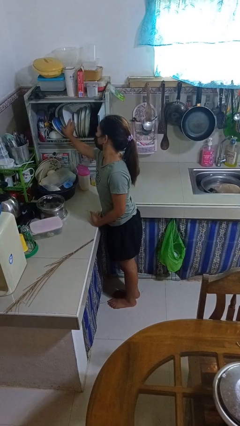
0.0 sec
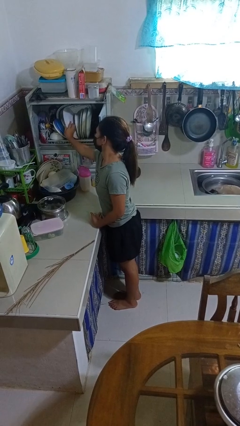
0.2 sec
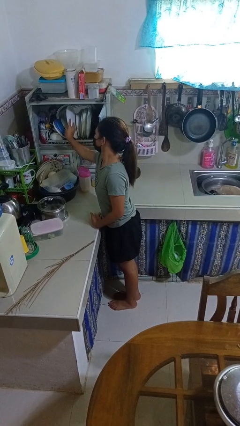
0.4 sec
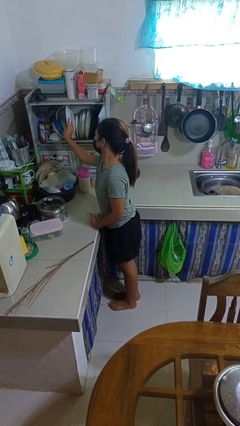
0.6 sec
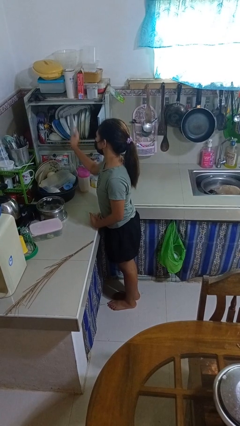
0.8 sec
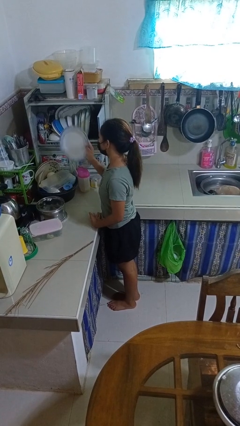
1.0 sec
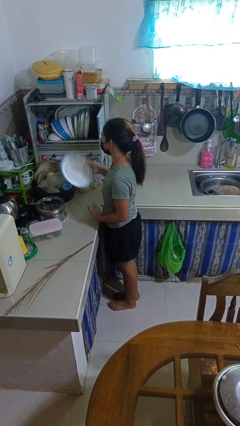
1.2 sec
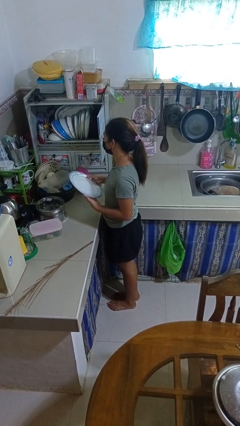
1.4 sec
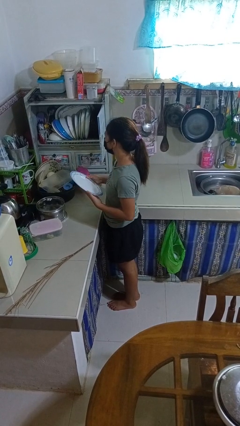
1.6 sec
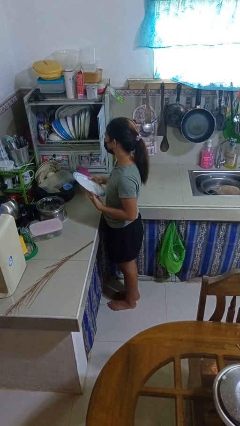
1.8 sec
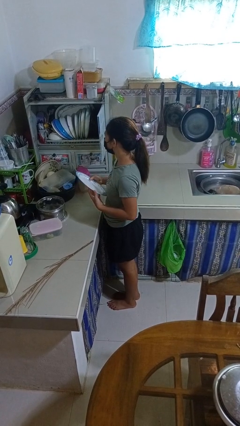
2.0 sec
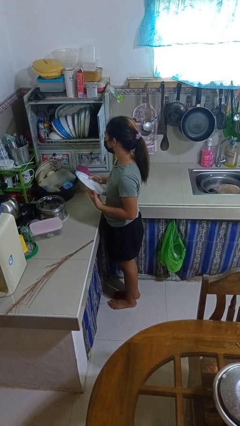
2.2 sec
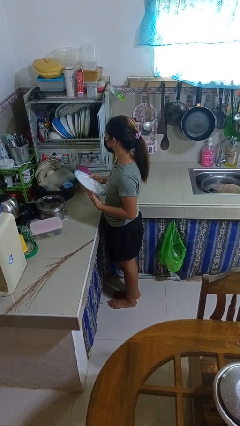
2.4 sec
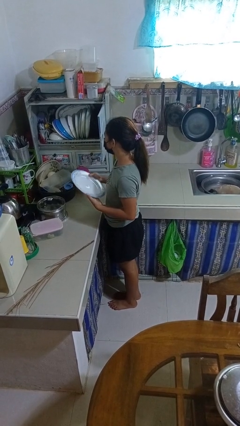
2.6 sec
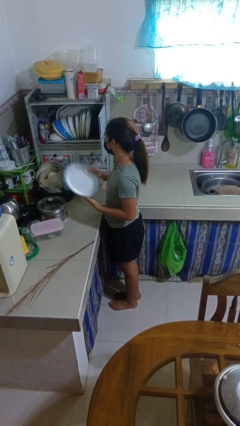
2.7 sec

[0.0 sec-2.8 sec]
person takes object from kitchen drawer

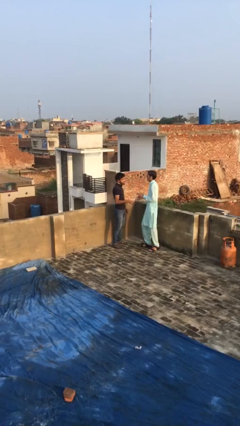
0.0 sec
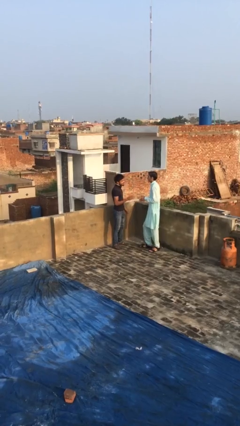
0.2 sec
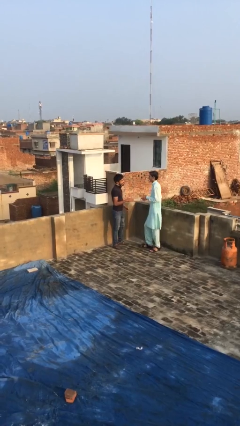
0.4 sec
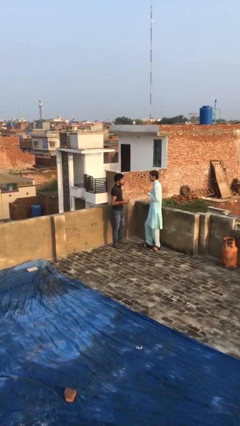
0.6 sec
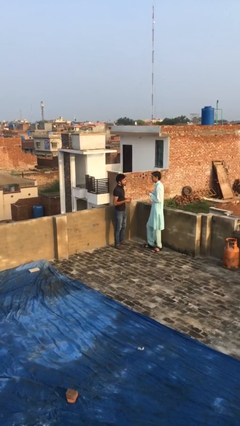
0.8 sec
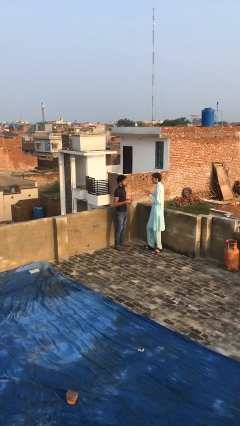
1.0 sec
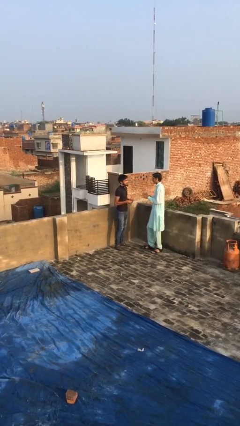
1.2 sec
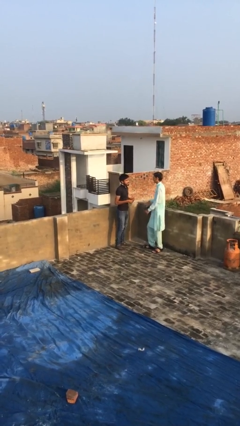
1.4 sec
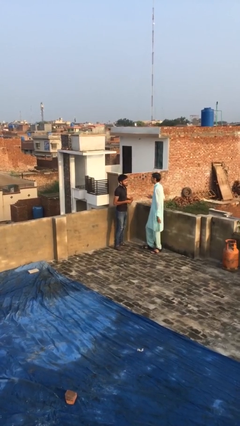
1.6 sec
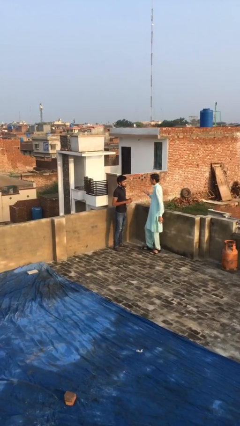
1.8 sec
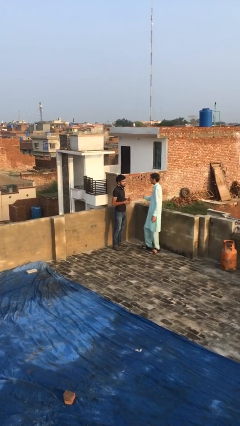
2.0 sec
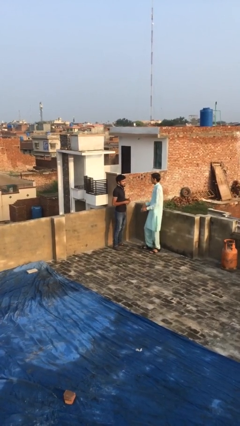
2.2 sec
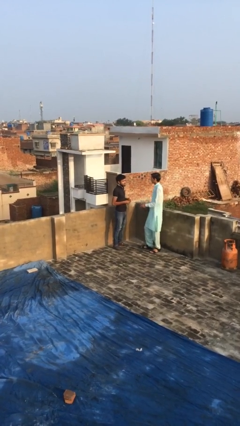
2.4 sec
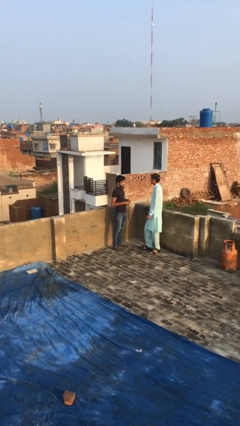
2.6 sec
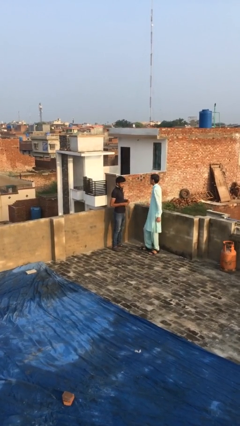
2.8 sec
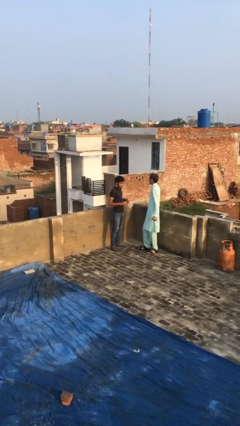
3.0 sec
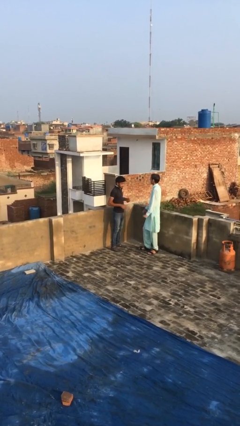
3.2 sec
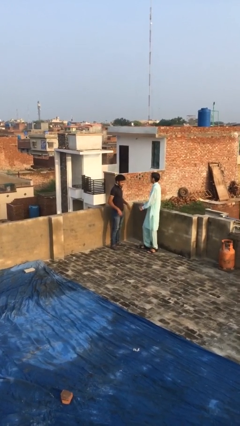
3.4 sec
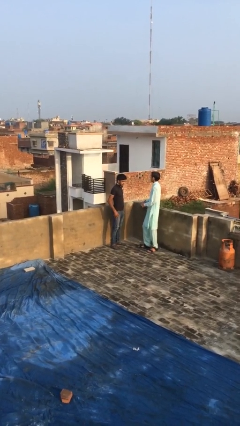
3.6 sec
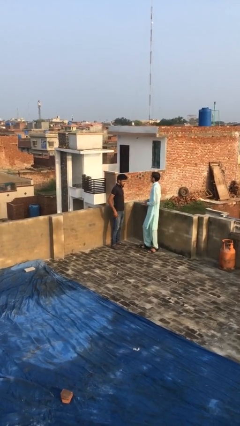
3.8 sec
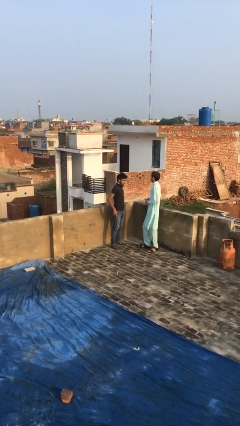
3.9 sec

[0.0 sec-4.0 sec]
person talks to person

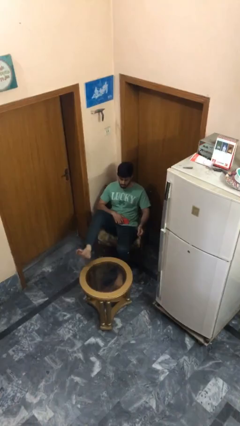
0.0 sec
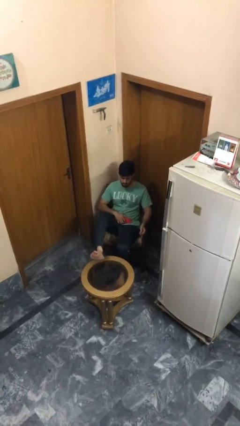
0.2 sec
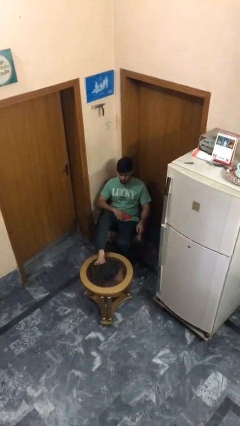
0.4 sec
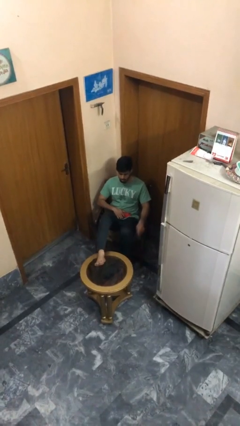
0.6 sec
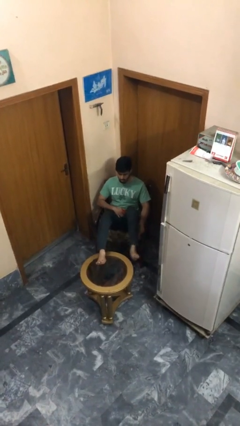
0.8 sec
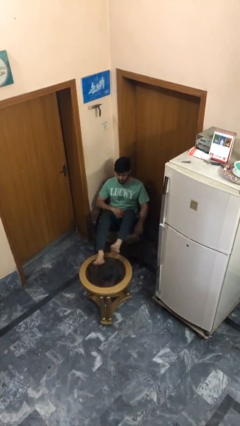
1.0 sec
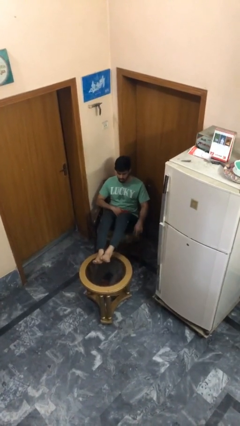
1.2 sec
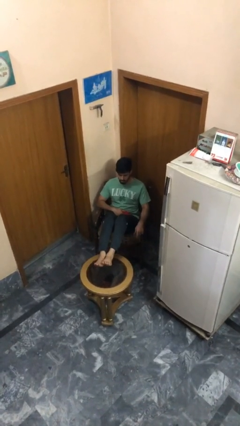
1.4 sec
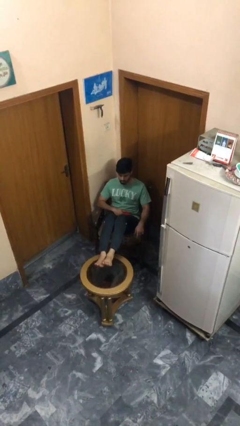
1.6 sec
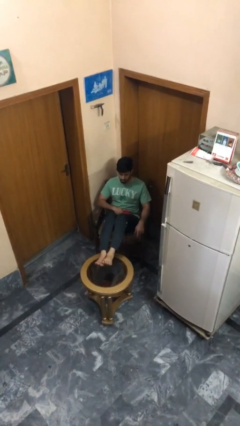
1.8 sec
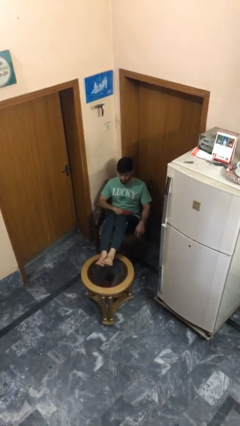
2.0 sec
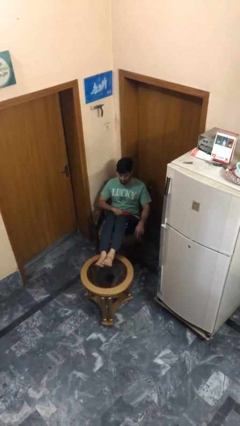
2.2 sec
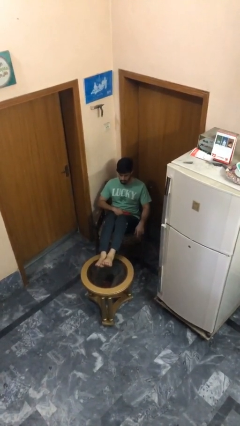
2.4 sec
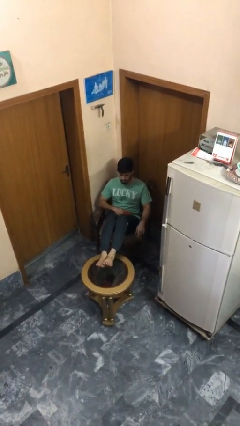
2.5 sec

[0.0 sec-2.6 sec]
person puts feet up

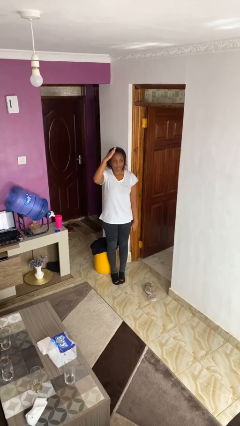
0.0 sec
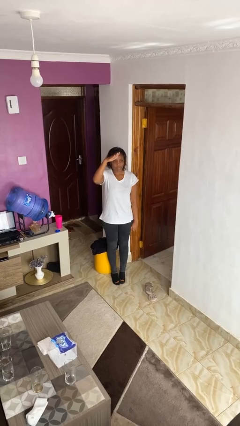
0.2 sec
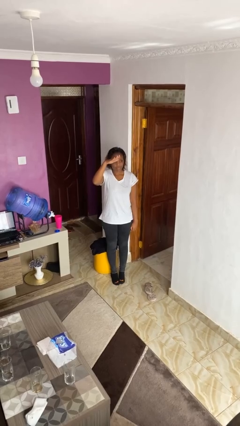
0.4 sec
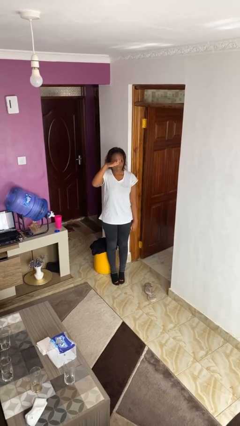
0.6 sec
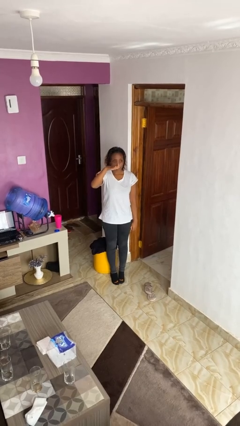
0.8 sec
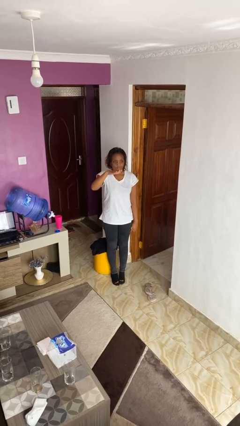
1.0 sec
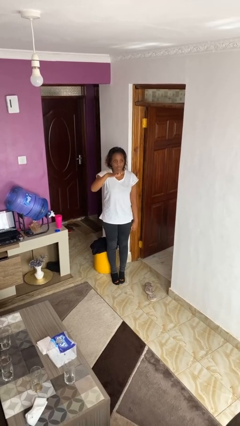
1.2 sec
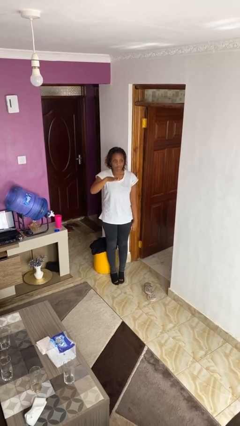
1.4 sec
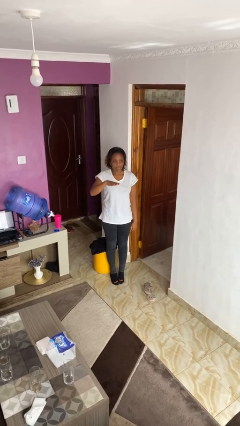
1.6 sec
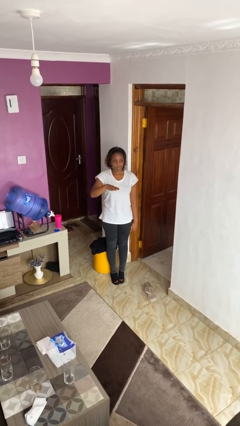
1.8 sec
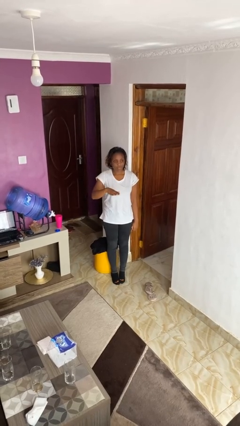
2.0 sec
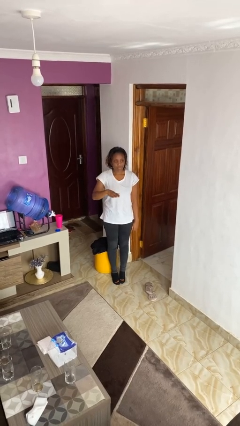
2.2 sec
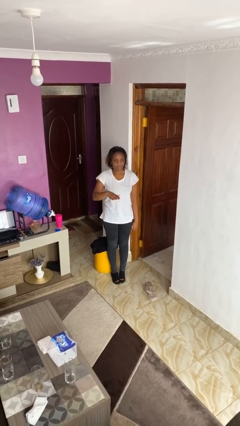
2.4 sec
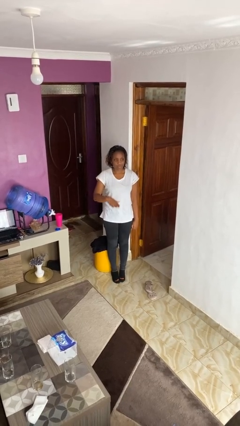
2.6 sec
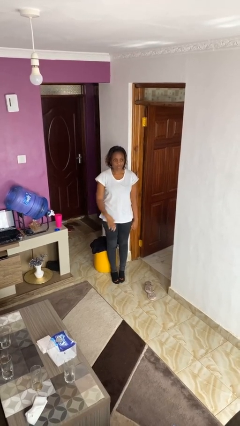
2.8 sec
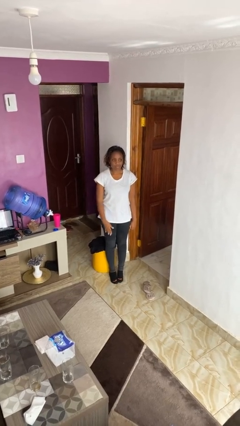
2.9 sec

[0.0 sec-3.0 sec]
person gestures swipe down

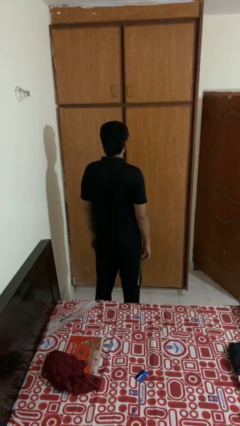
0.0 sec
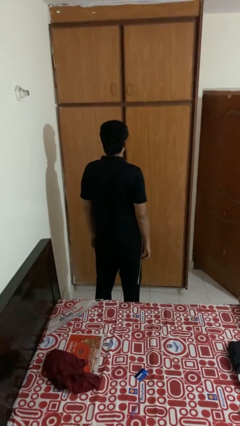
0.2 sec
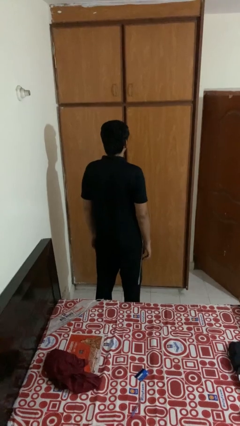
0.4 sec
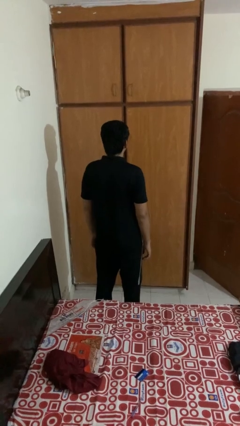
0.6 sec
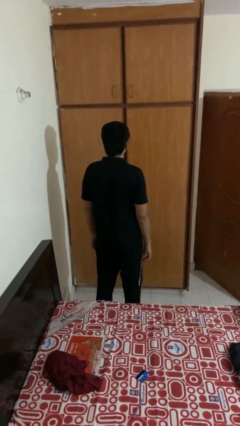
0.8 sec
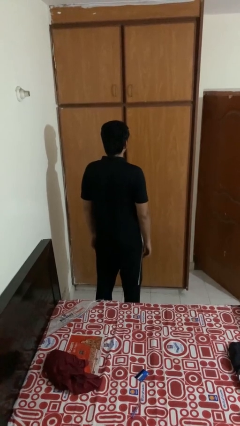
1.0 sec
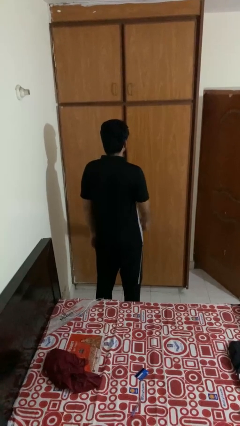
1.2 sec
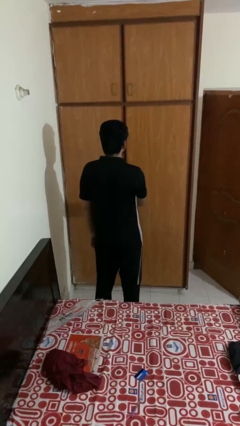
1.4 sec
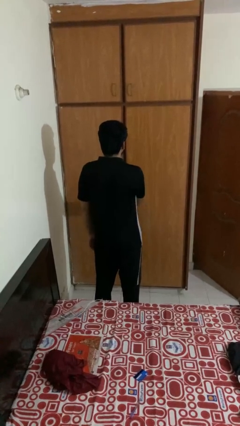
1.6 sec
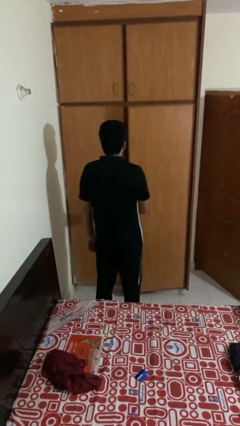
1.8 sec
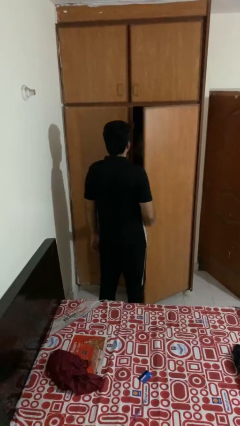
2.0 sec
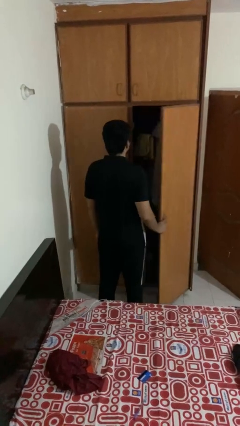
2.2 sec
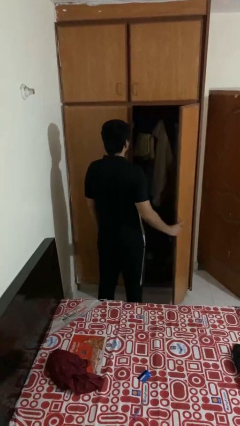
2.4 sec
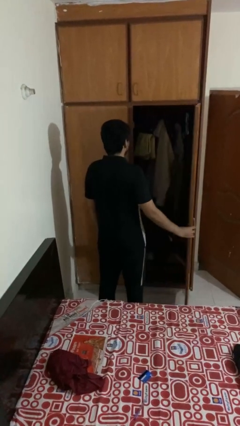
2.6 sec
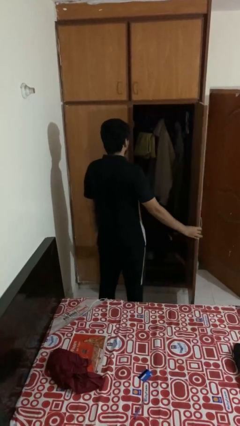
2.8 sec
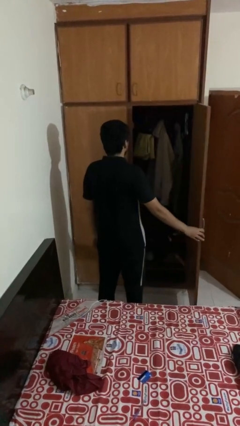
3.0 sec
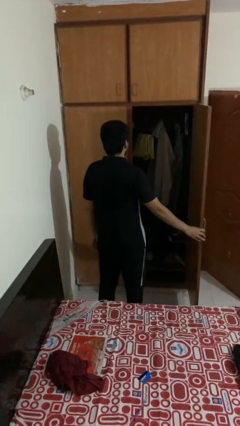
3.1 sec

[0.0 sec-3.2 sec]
person opens closet door

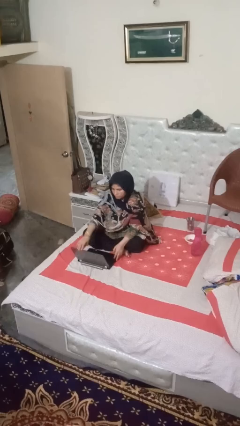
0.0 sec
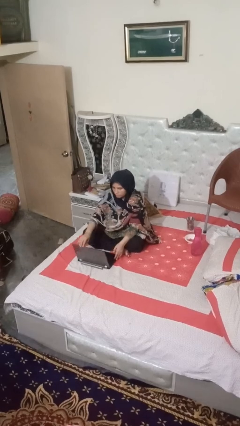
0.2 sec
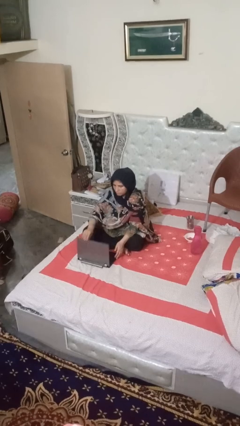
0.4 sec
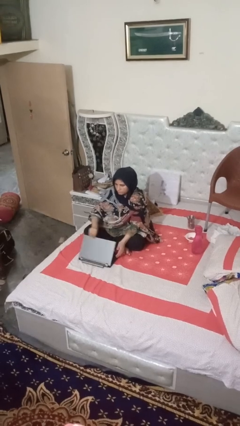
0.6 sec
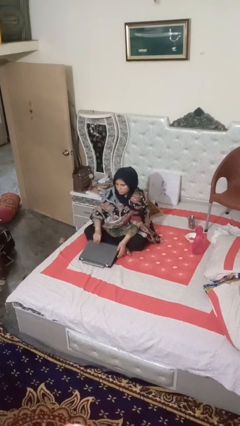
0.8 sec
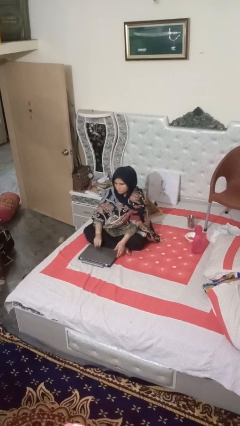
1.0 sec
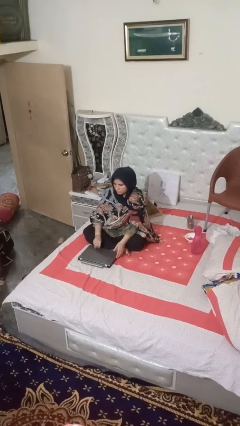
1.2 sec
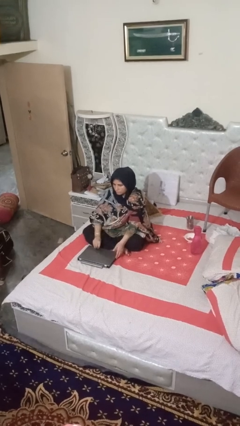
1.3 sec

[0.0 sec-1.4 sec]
person closes laptop

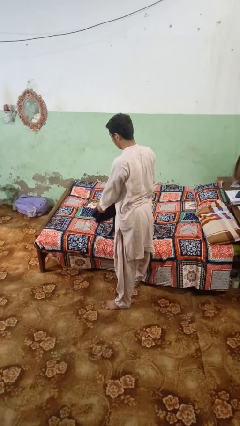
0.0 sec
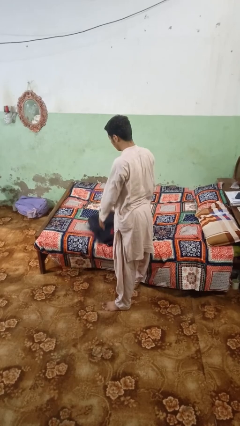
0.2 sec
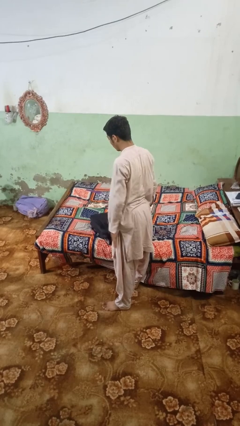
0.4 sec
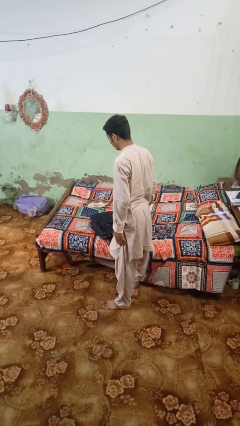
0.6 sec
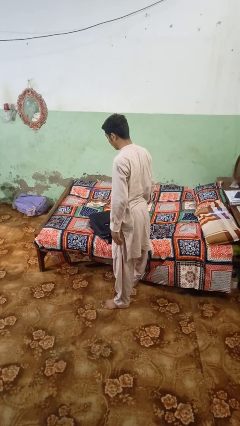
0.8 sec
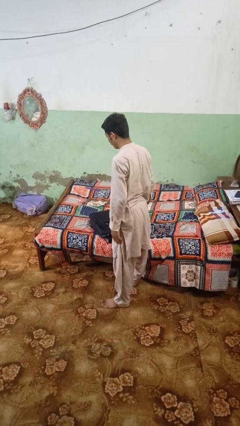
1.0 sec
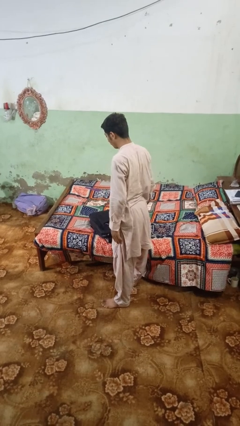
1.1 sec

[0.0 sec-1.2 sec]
person puts down object on bed
